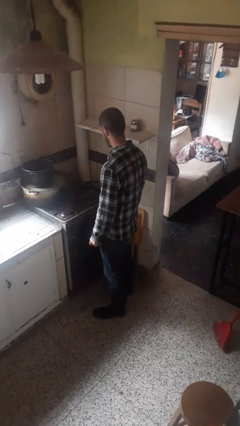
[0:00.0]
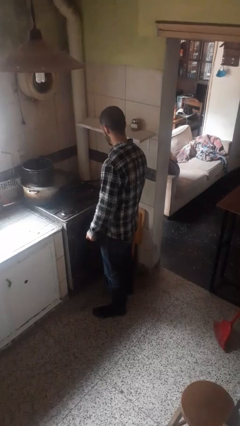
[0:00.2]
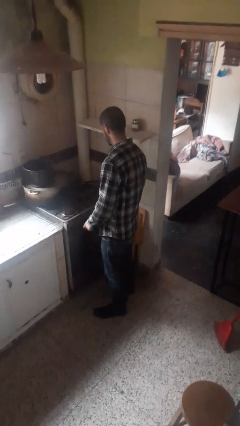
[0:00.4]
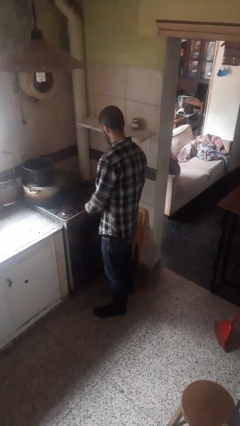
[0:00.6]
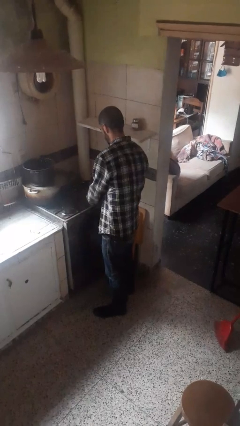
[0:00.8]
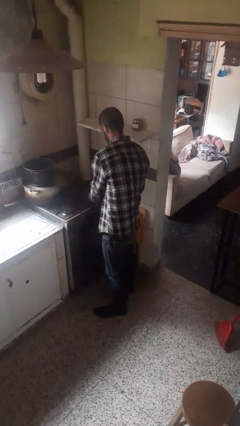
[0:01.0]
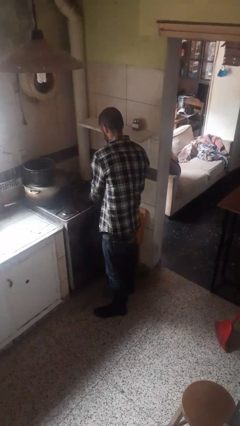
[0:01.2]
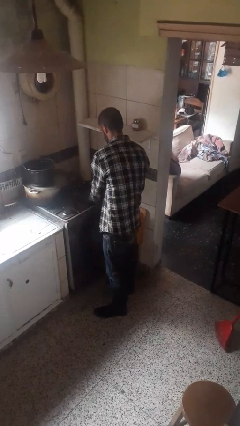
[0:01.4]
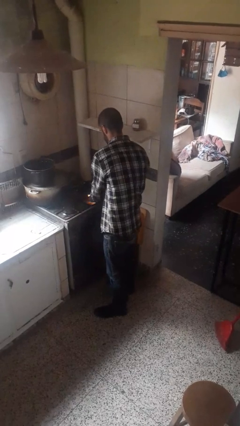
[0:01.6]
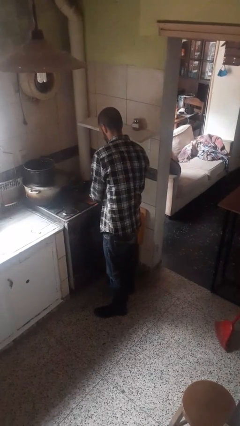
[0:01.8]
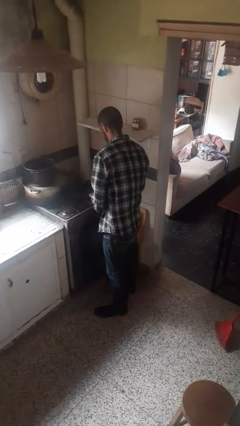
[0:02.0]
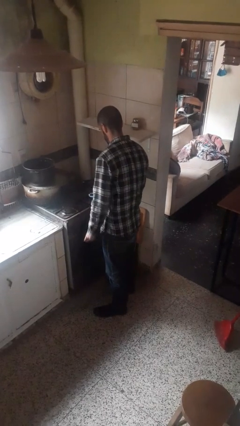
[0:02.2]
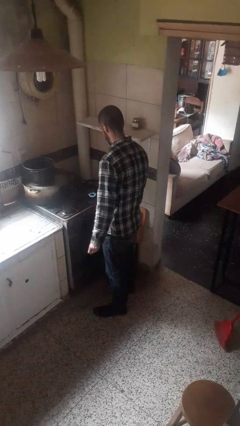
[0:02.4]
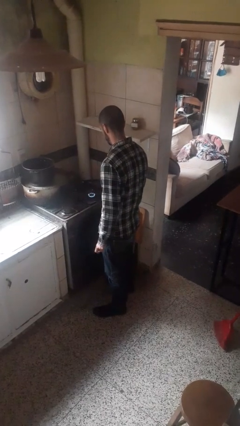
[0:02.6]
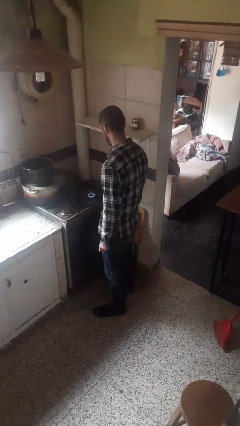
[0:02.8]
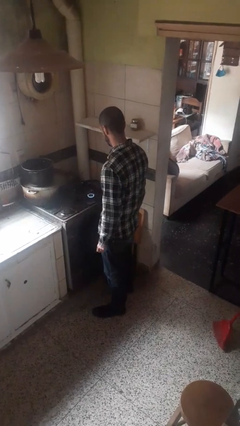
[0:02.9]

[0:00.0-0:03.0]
person turns on stovetop

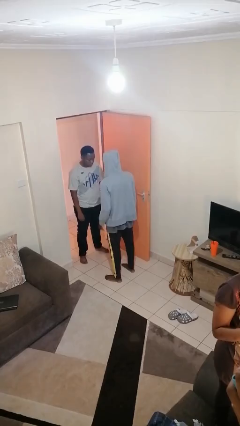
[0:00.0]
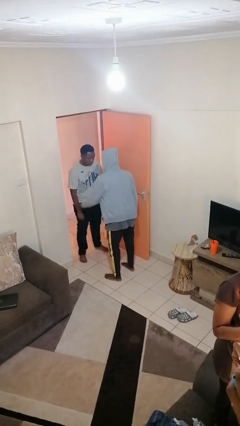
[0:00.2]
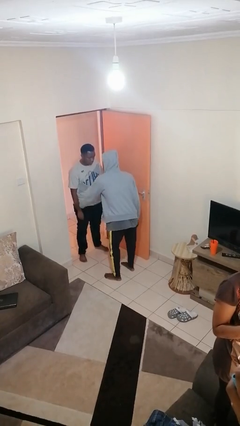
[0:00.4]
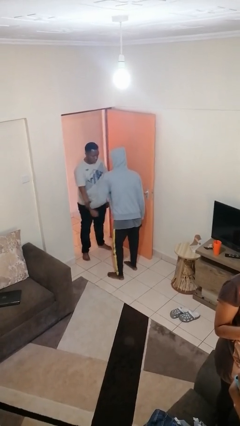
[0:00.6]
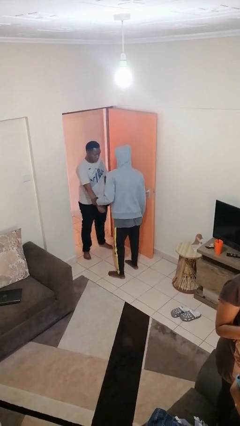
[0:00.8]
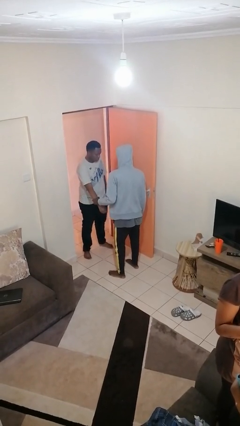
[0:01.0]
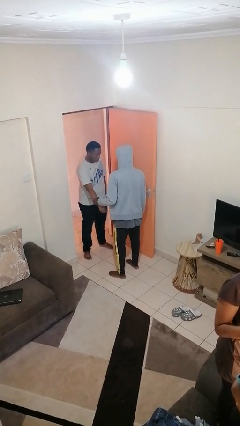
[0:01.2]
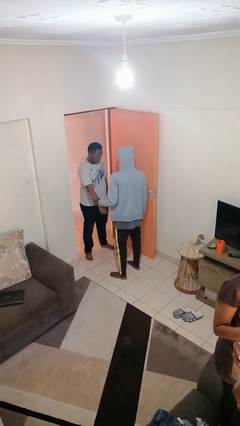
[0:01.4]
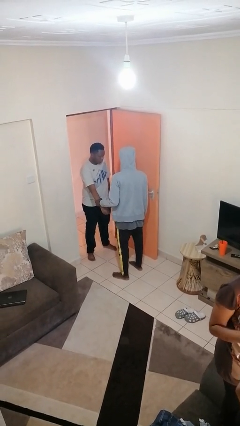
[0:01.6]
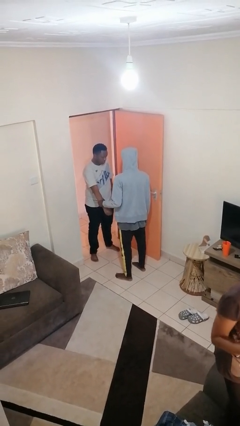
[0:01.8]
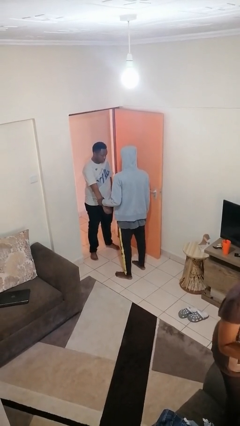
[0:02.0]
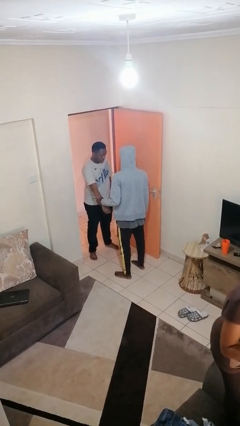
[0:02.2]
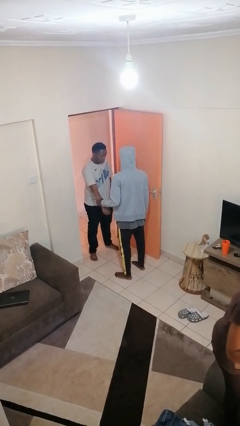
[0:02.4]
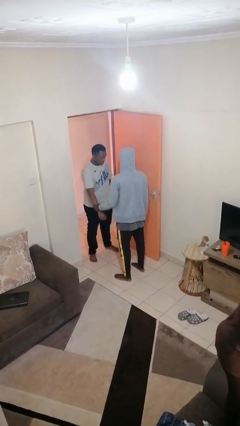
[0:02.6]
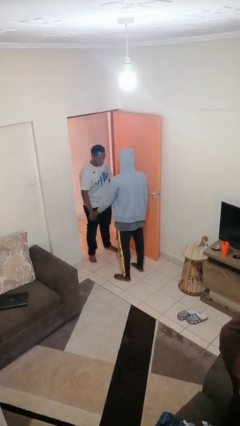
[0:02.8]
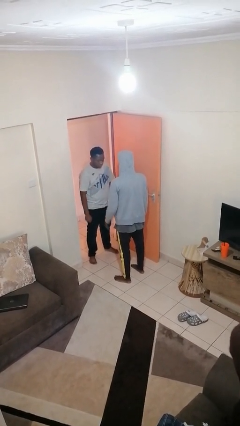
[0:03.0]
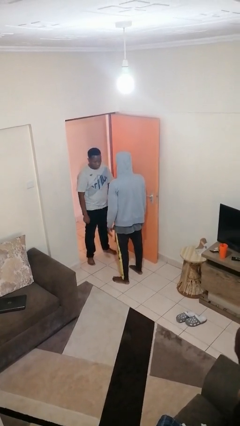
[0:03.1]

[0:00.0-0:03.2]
person grabs person by forearm

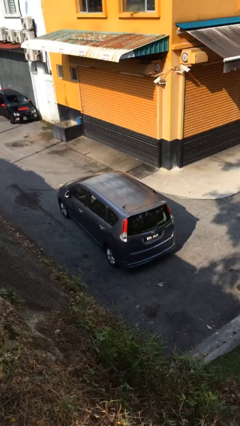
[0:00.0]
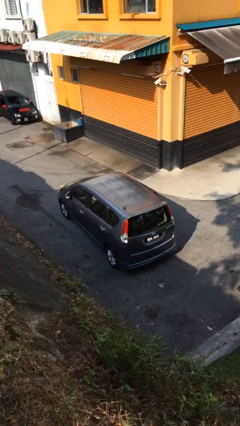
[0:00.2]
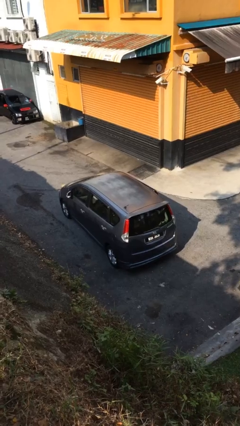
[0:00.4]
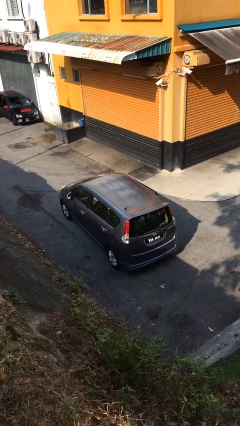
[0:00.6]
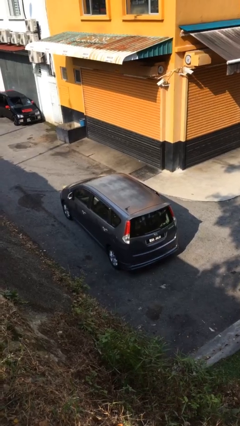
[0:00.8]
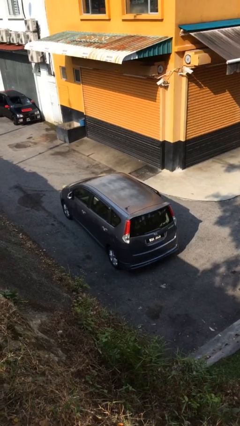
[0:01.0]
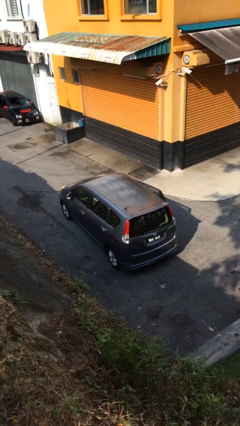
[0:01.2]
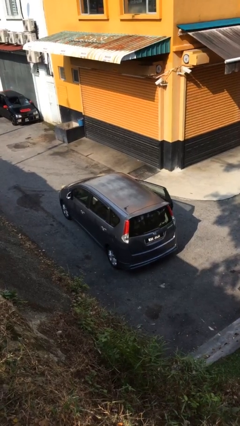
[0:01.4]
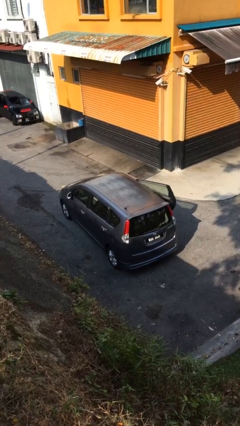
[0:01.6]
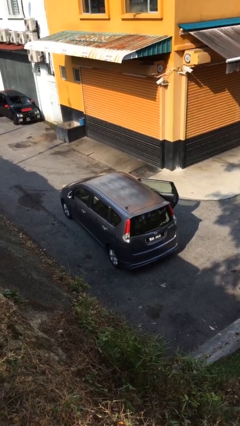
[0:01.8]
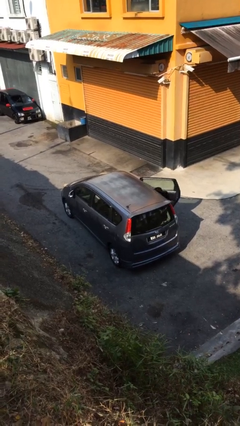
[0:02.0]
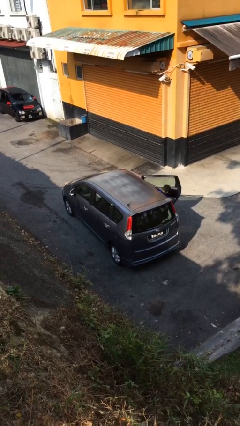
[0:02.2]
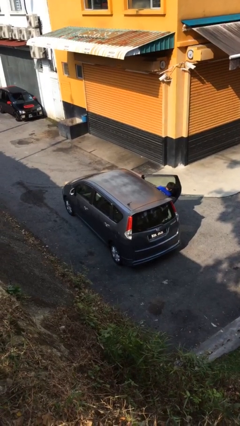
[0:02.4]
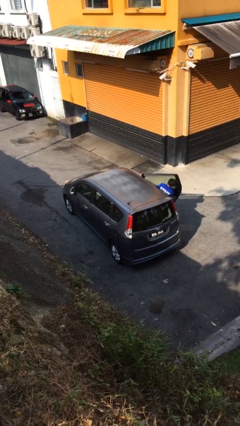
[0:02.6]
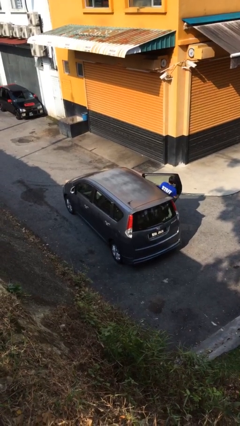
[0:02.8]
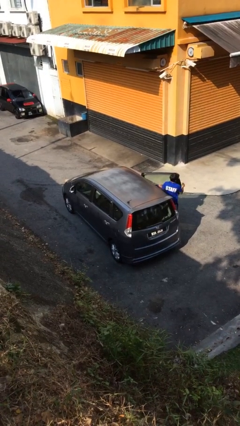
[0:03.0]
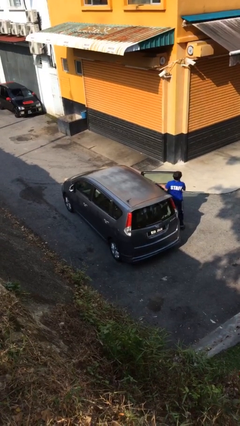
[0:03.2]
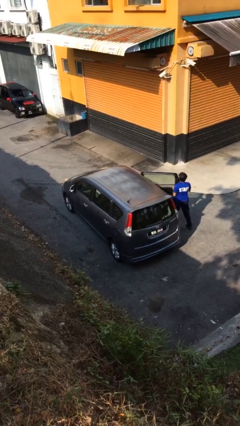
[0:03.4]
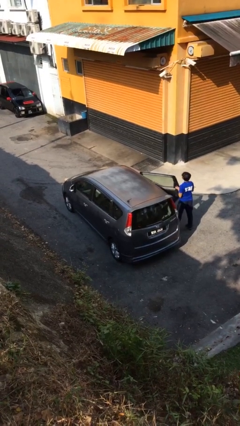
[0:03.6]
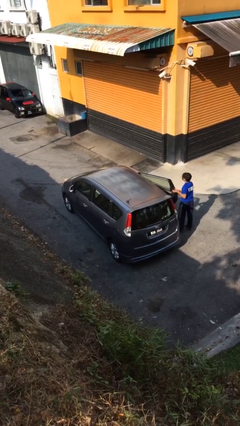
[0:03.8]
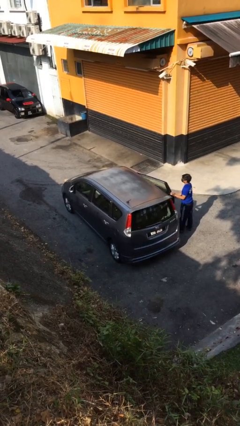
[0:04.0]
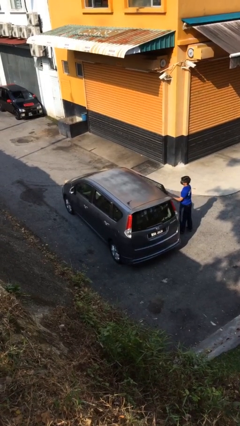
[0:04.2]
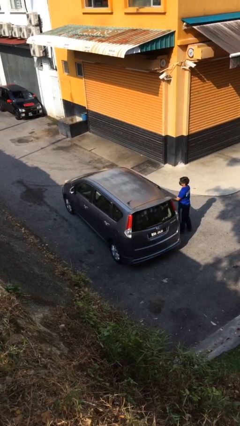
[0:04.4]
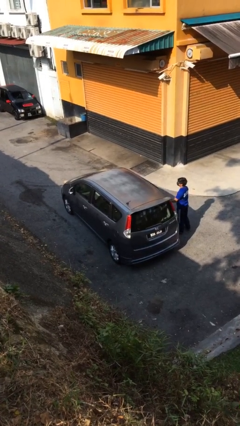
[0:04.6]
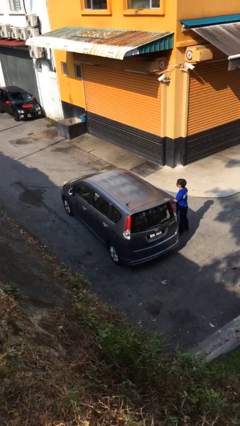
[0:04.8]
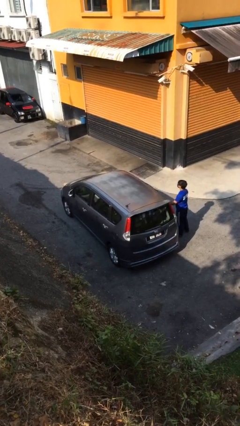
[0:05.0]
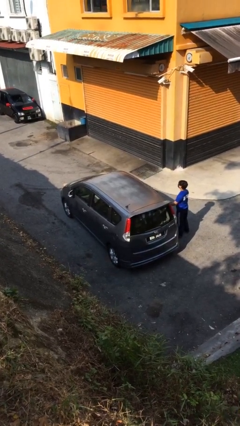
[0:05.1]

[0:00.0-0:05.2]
car drops off person

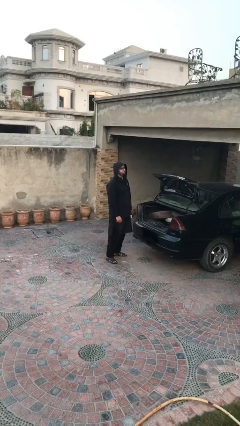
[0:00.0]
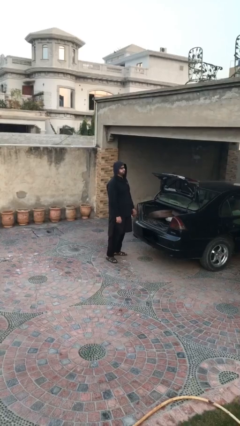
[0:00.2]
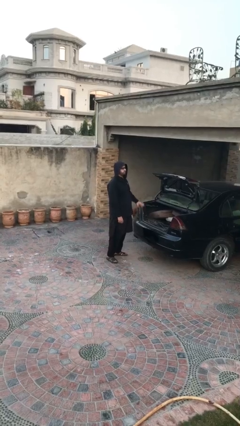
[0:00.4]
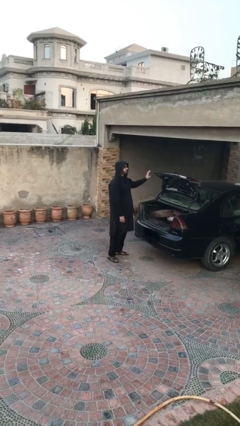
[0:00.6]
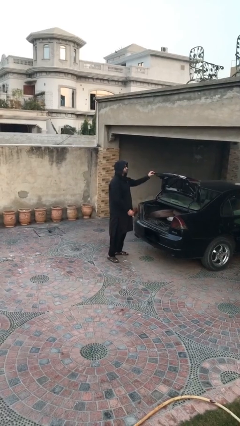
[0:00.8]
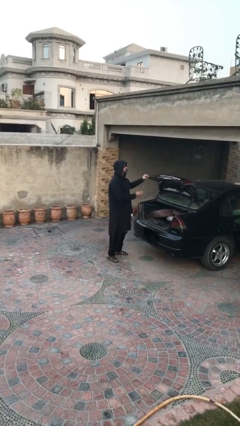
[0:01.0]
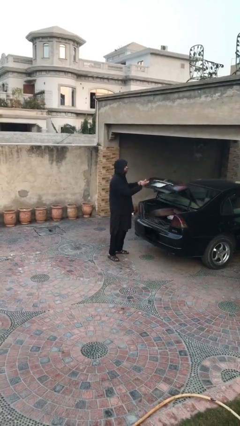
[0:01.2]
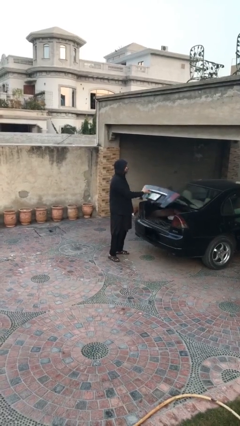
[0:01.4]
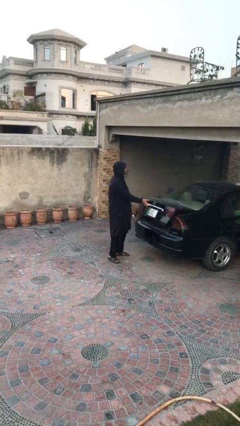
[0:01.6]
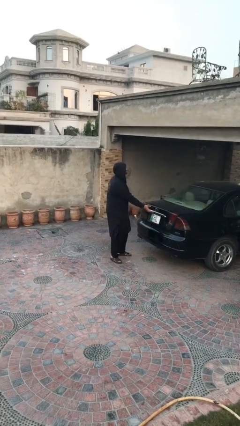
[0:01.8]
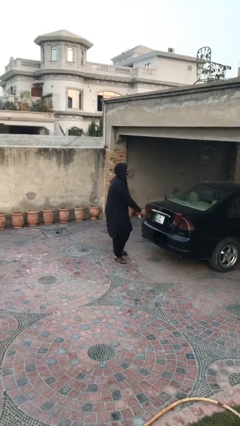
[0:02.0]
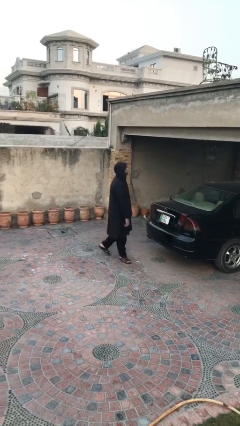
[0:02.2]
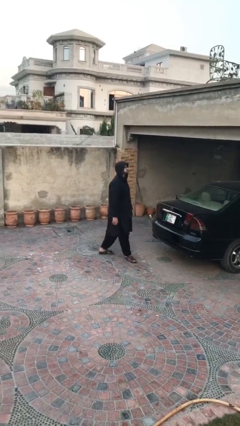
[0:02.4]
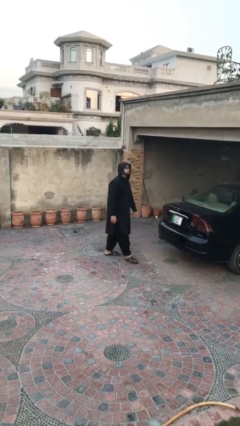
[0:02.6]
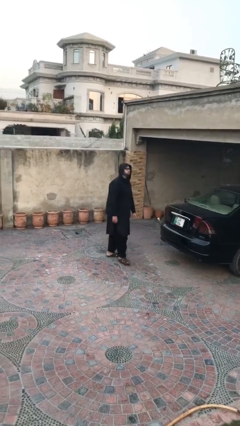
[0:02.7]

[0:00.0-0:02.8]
person closes car trunk

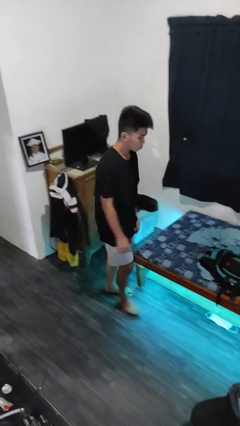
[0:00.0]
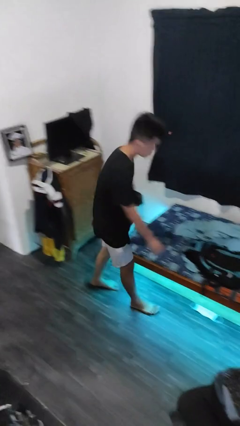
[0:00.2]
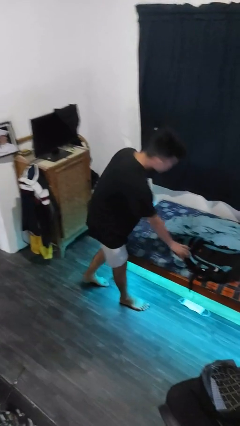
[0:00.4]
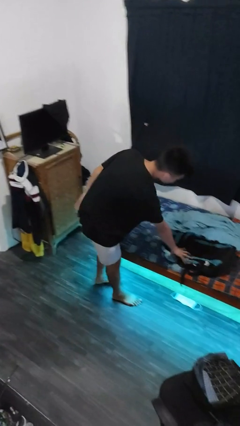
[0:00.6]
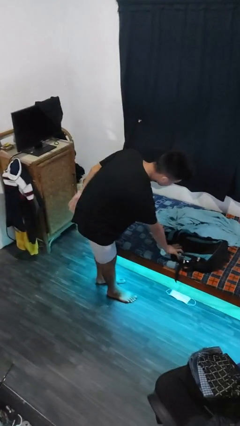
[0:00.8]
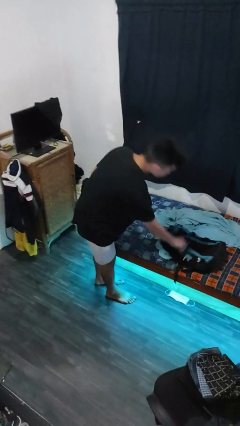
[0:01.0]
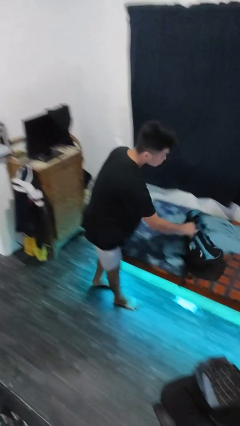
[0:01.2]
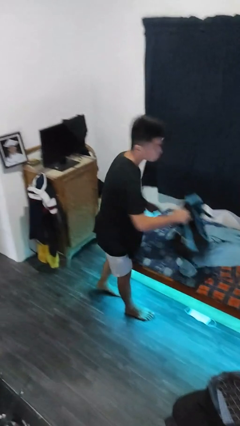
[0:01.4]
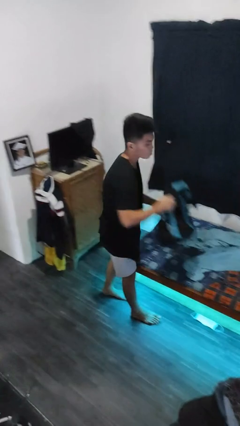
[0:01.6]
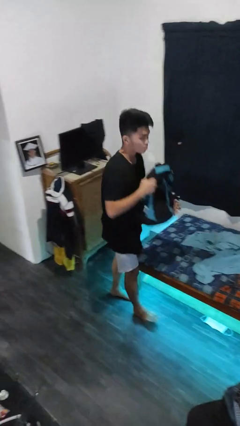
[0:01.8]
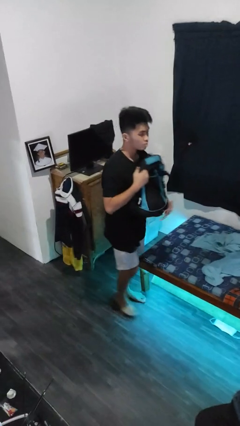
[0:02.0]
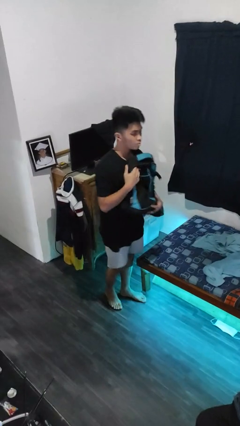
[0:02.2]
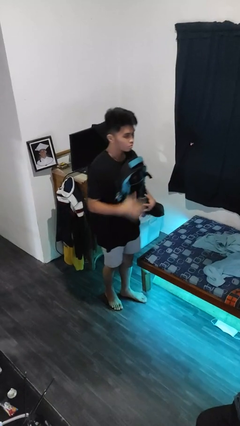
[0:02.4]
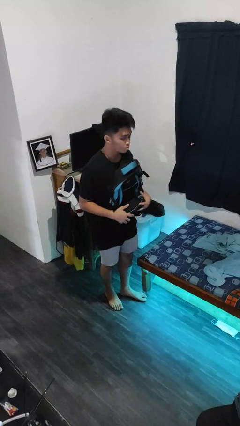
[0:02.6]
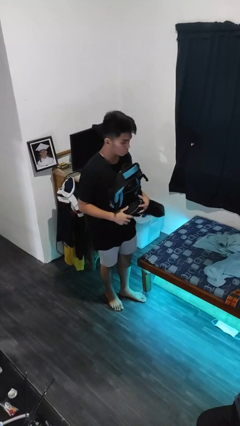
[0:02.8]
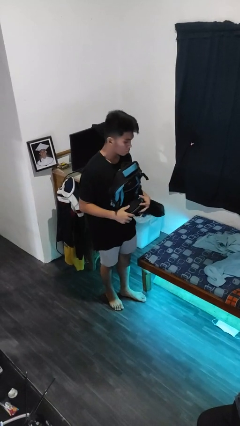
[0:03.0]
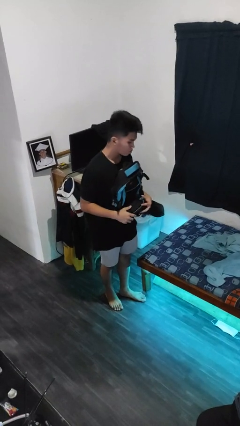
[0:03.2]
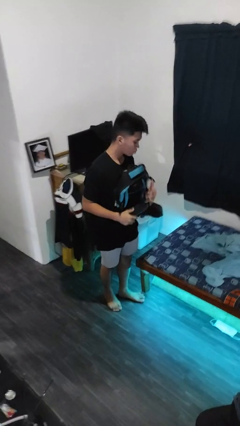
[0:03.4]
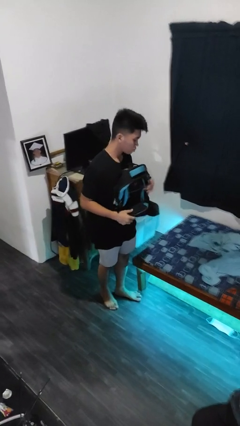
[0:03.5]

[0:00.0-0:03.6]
person picks up object from bed

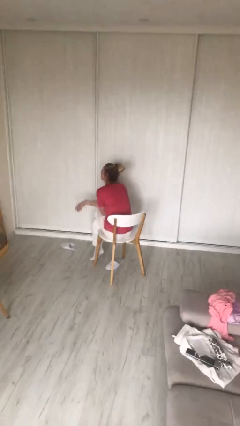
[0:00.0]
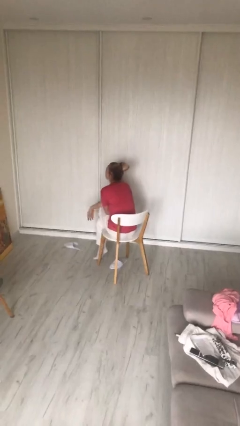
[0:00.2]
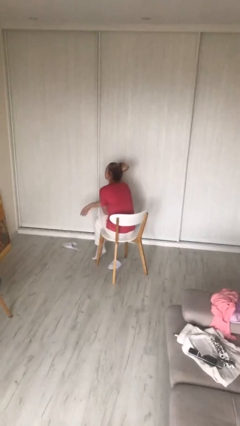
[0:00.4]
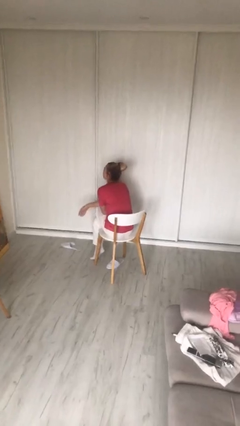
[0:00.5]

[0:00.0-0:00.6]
person strokes chin
